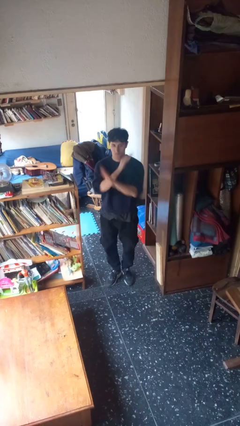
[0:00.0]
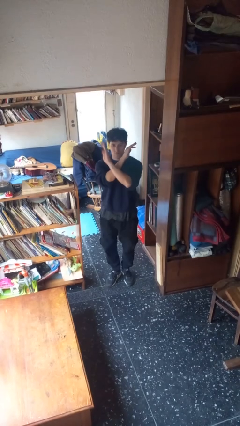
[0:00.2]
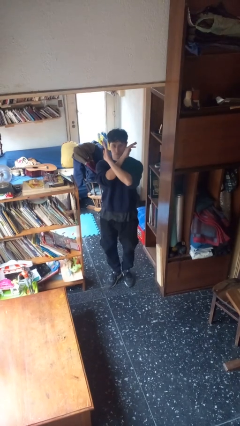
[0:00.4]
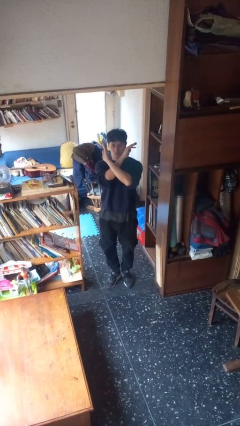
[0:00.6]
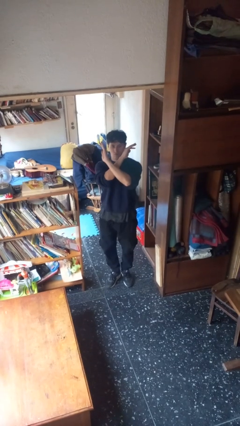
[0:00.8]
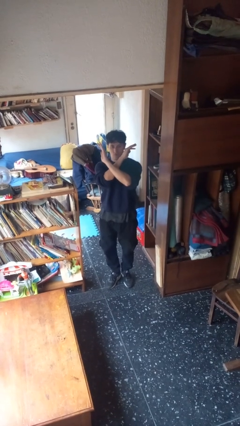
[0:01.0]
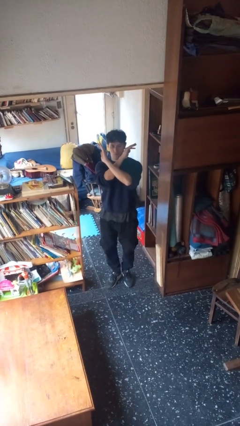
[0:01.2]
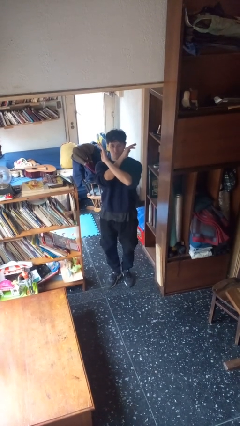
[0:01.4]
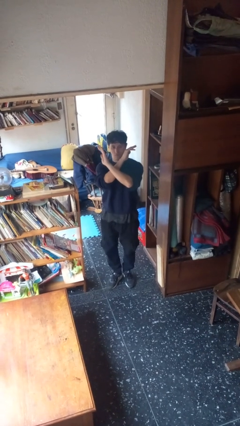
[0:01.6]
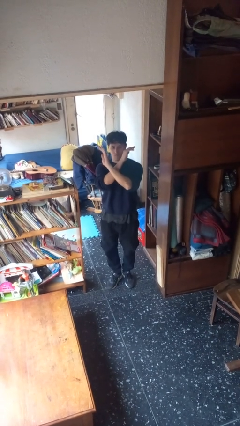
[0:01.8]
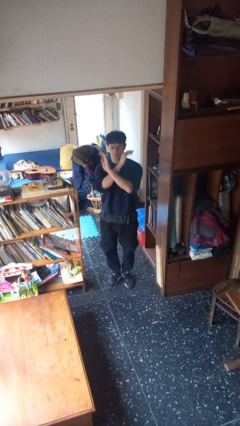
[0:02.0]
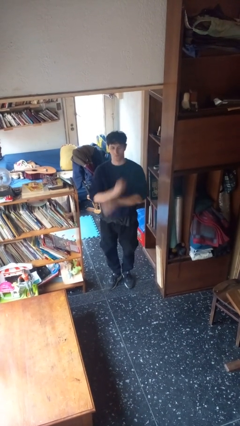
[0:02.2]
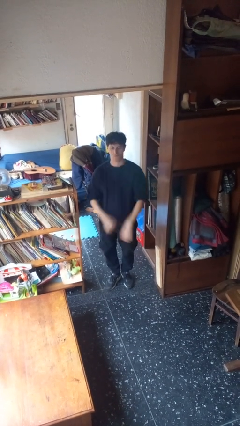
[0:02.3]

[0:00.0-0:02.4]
person gestures arms x

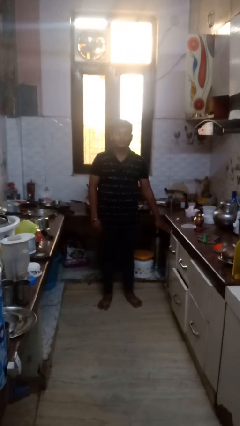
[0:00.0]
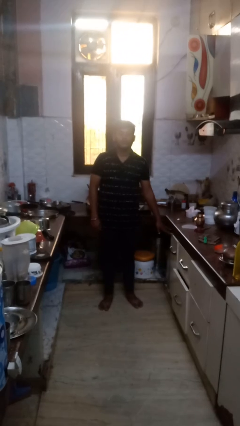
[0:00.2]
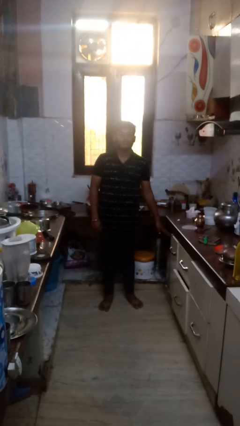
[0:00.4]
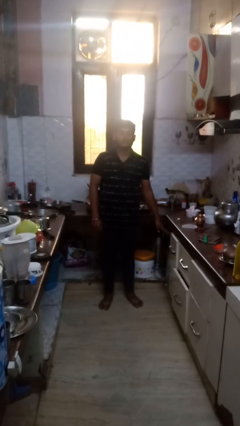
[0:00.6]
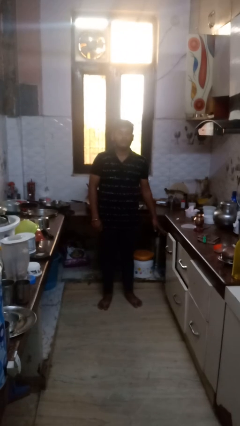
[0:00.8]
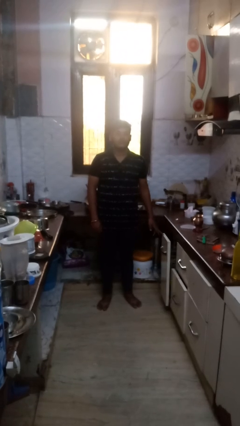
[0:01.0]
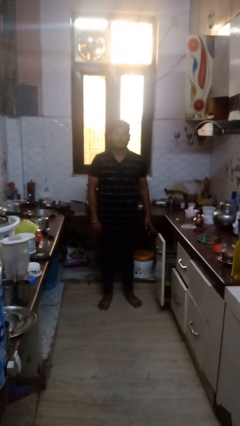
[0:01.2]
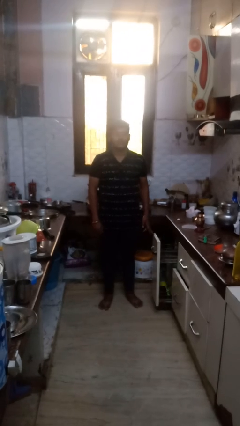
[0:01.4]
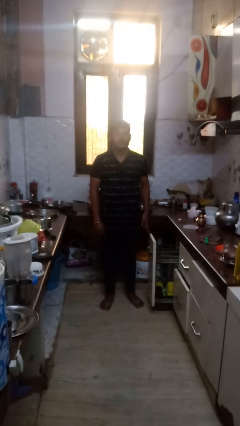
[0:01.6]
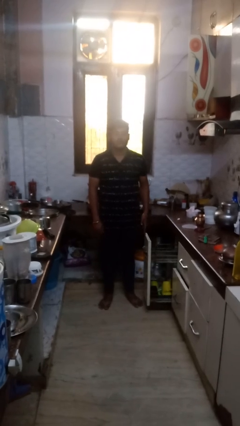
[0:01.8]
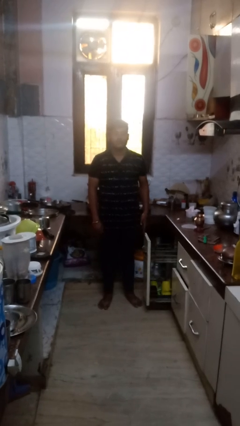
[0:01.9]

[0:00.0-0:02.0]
person opens dishwasher

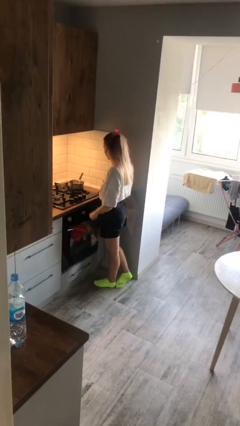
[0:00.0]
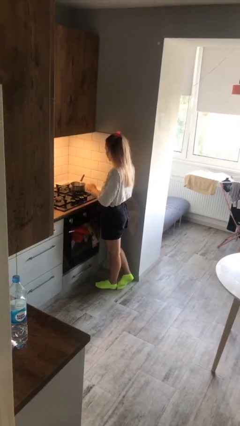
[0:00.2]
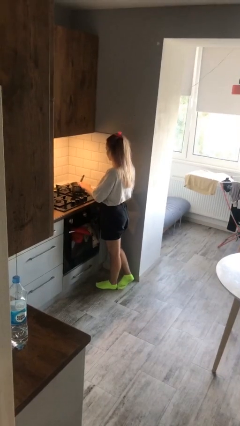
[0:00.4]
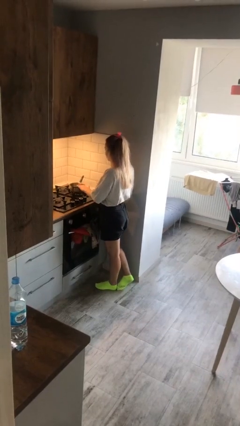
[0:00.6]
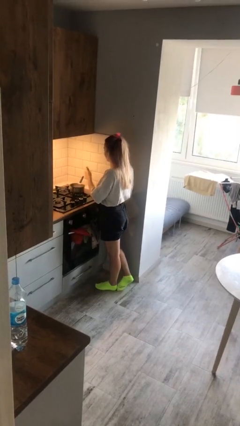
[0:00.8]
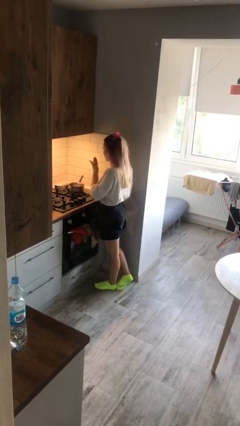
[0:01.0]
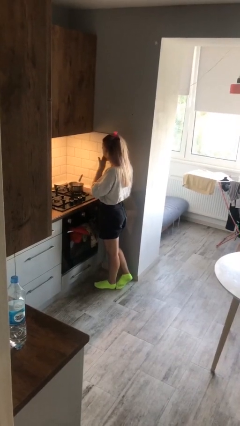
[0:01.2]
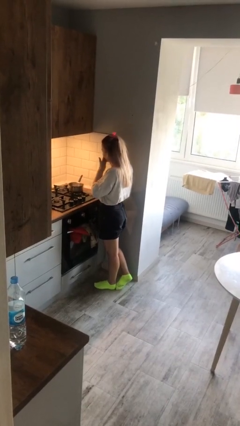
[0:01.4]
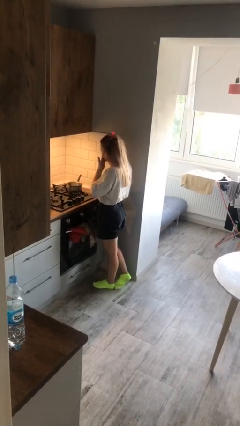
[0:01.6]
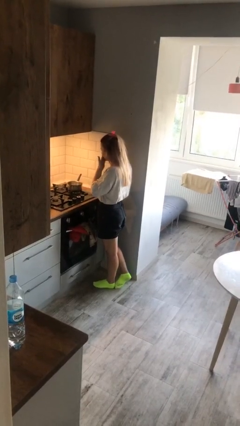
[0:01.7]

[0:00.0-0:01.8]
person burns hand

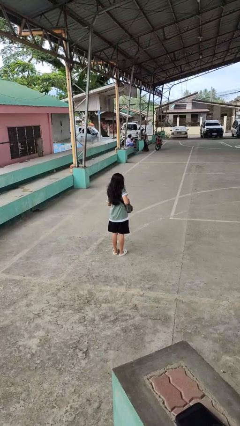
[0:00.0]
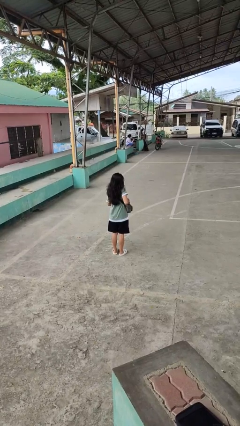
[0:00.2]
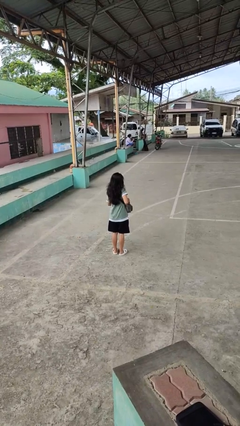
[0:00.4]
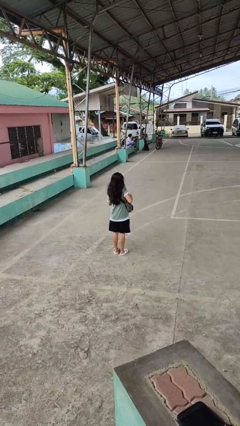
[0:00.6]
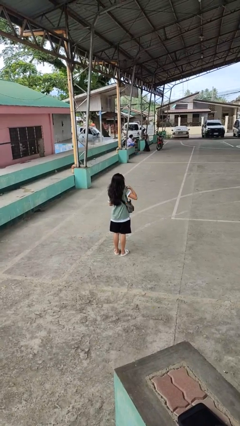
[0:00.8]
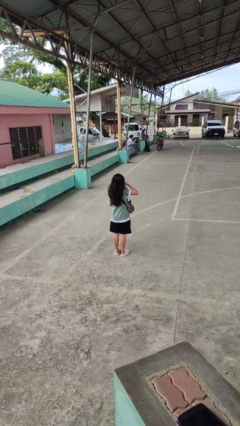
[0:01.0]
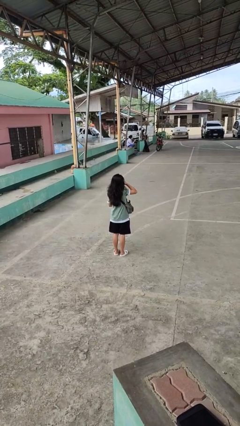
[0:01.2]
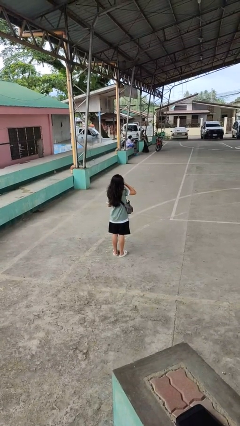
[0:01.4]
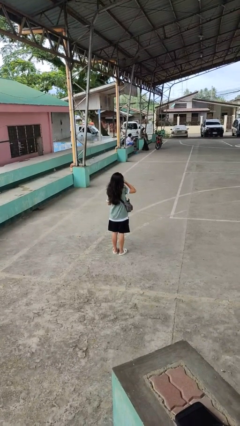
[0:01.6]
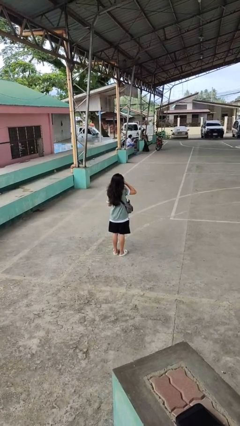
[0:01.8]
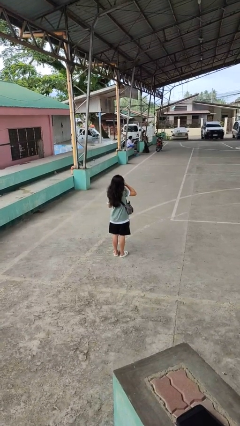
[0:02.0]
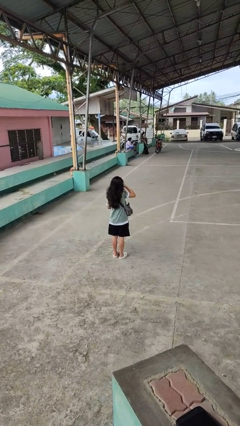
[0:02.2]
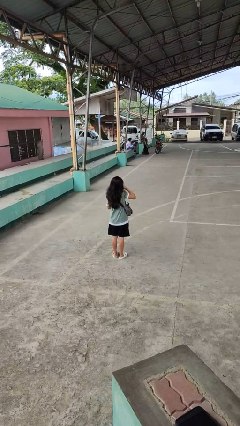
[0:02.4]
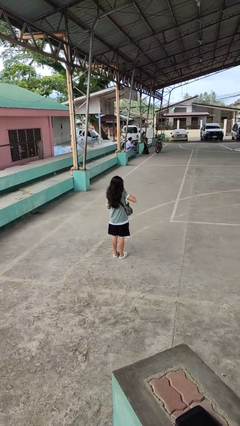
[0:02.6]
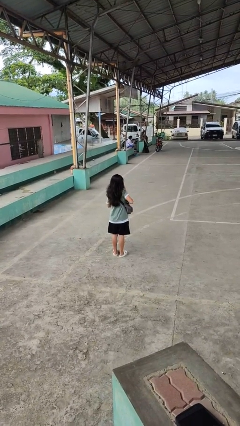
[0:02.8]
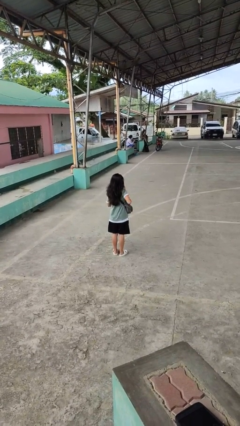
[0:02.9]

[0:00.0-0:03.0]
person eats snack from bag

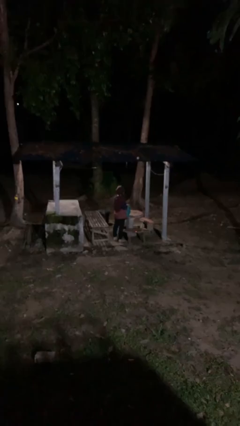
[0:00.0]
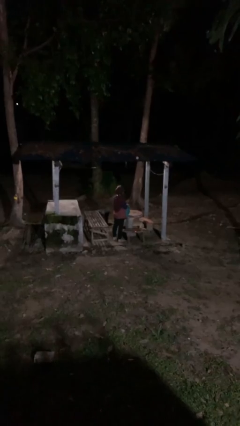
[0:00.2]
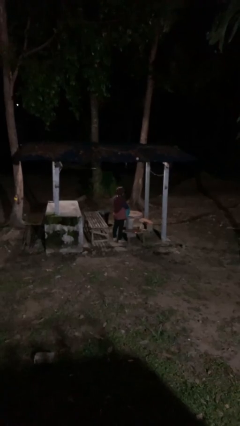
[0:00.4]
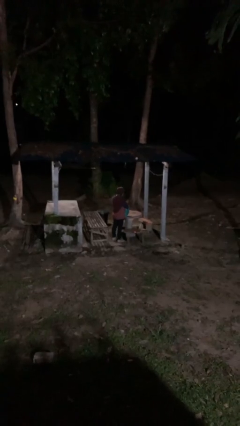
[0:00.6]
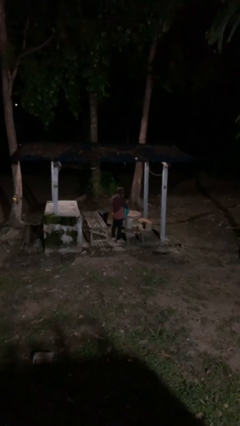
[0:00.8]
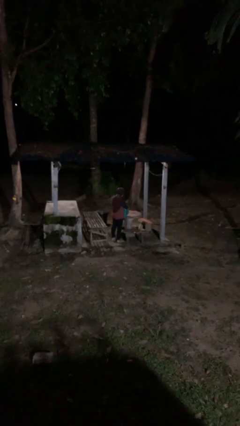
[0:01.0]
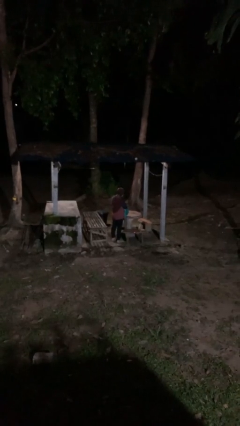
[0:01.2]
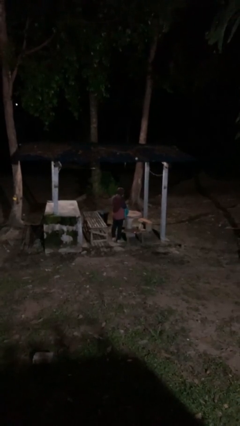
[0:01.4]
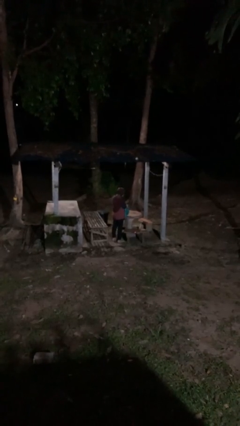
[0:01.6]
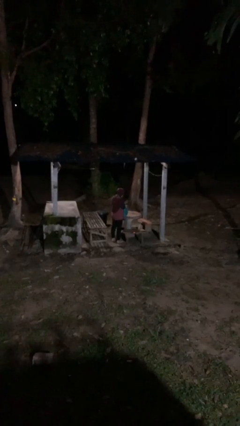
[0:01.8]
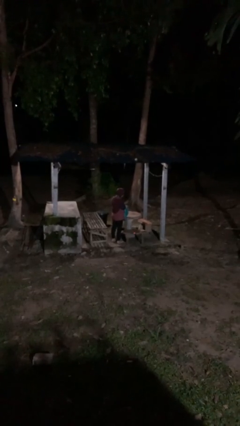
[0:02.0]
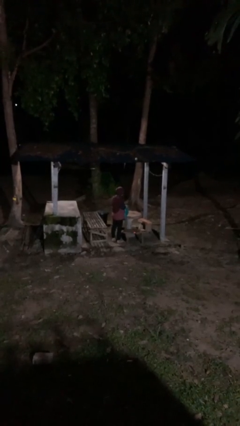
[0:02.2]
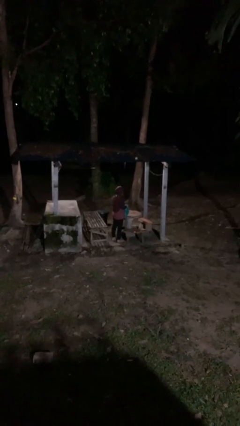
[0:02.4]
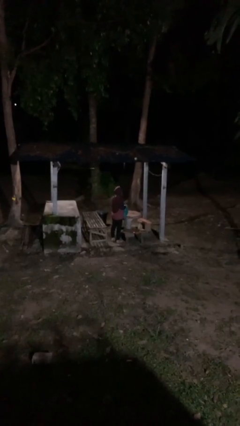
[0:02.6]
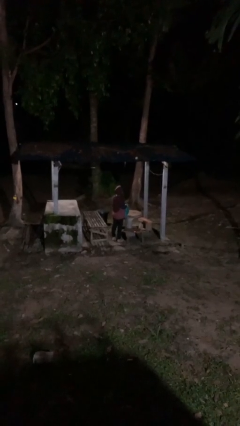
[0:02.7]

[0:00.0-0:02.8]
person searches in bag

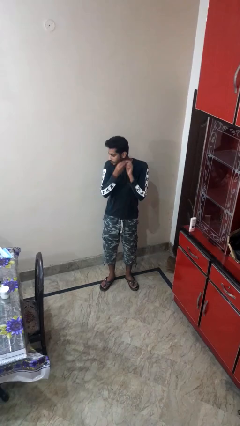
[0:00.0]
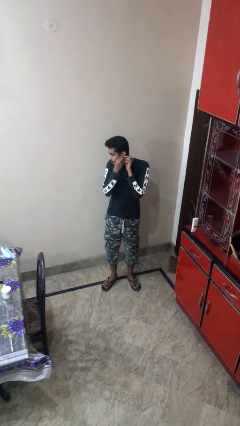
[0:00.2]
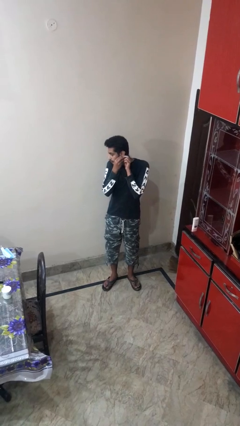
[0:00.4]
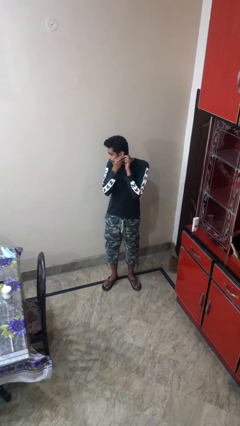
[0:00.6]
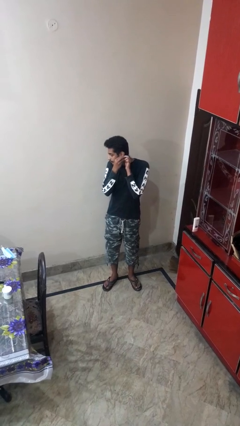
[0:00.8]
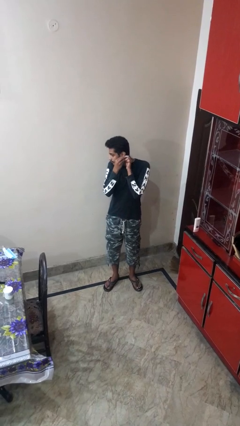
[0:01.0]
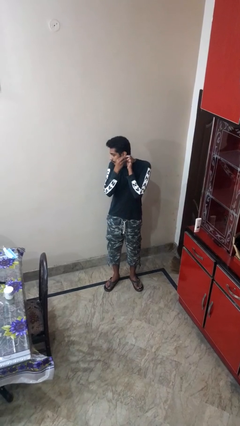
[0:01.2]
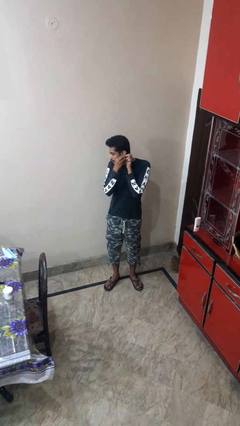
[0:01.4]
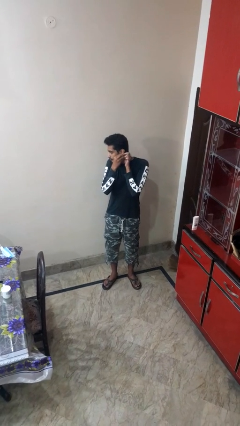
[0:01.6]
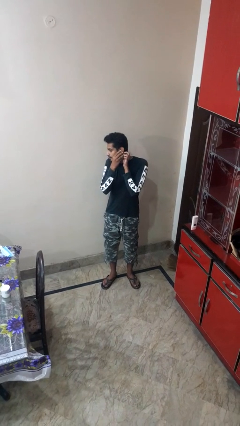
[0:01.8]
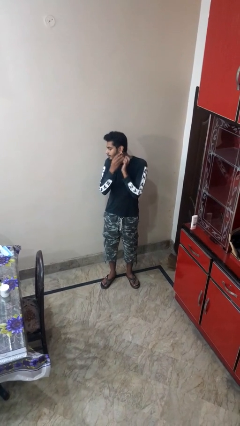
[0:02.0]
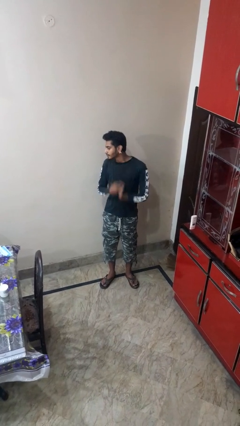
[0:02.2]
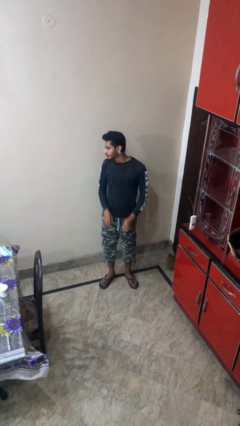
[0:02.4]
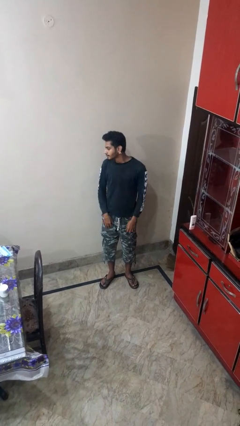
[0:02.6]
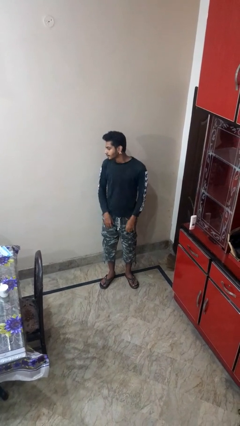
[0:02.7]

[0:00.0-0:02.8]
person puts on earrings

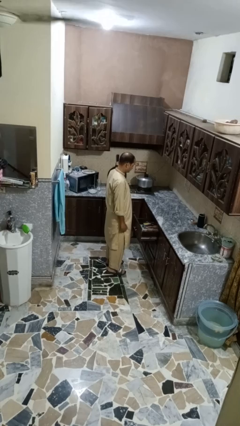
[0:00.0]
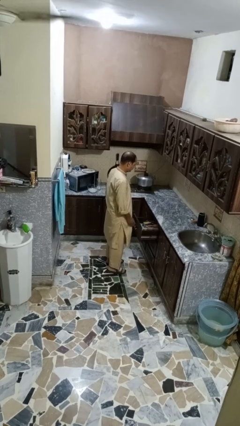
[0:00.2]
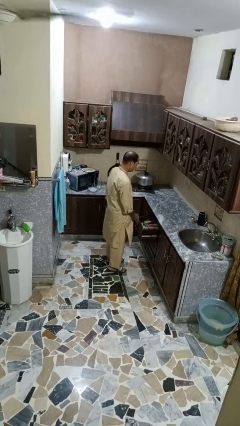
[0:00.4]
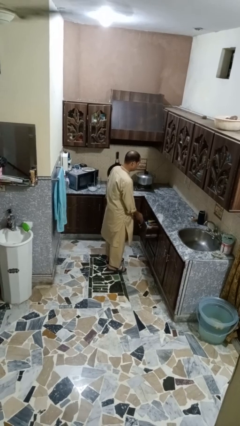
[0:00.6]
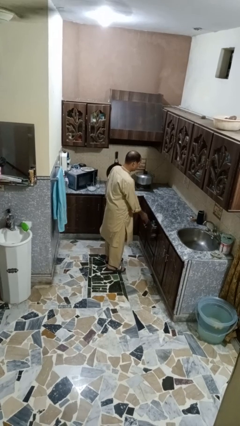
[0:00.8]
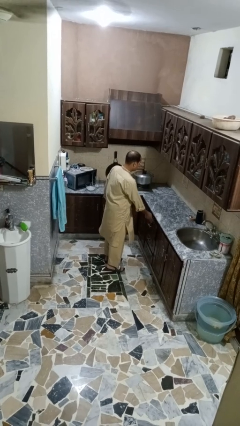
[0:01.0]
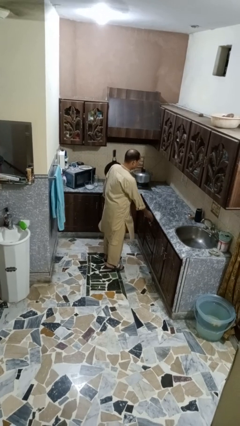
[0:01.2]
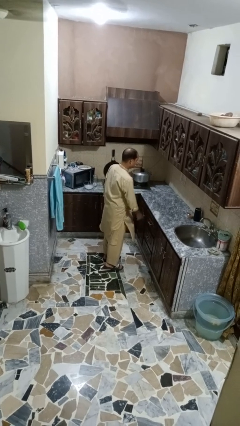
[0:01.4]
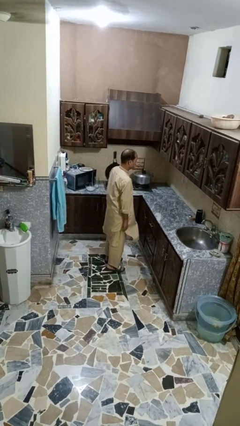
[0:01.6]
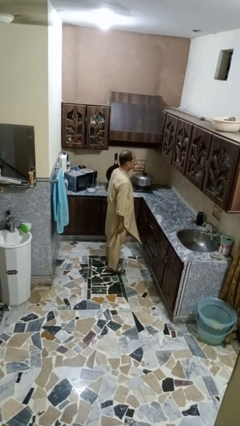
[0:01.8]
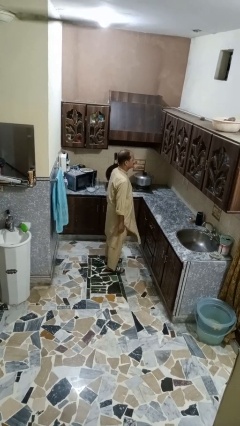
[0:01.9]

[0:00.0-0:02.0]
person closes kitchen drawer

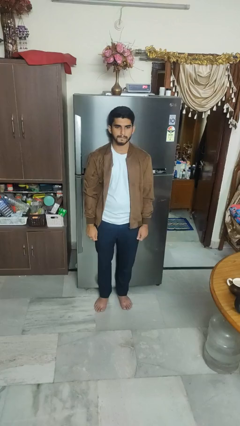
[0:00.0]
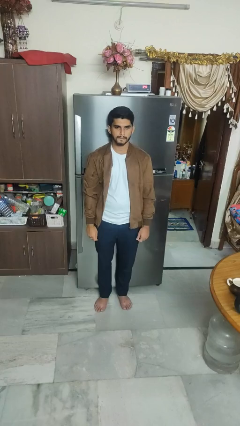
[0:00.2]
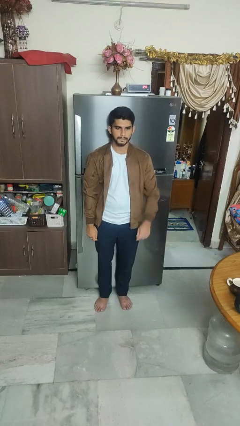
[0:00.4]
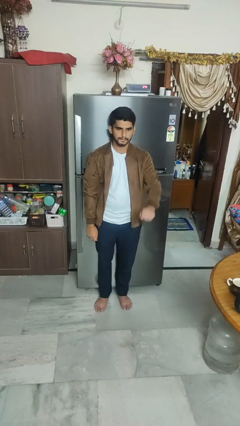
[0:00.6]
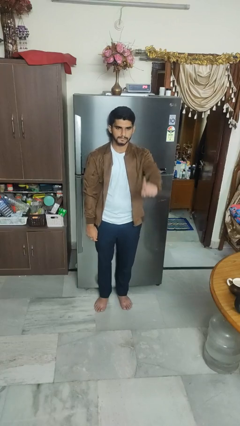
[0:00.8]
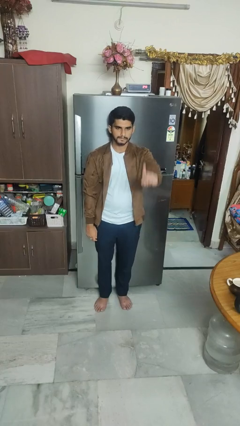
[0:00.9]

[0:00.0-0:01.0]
person gestures number one
